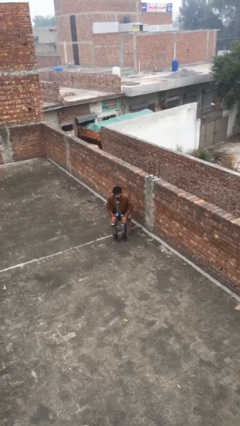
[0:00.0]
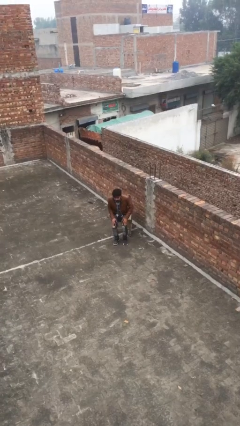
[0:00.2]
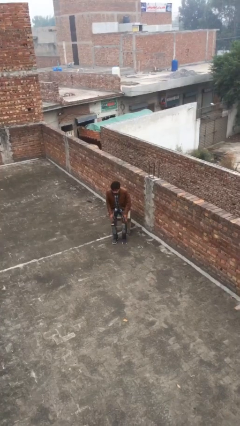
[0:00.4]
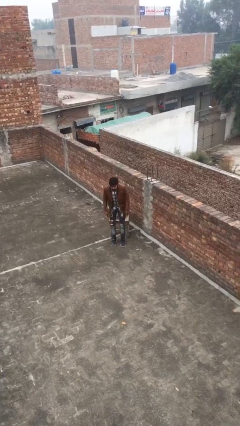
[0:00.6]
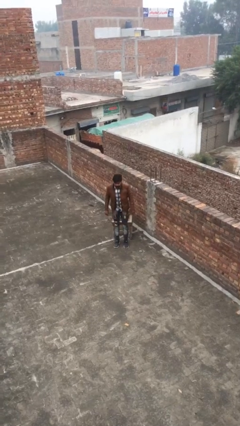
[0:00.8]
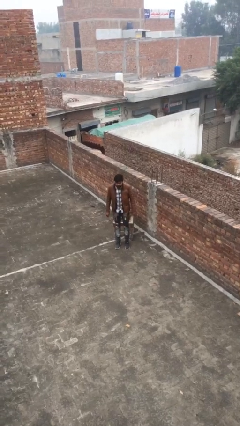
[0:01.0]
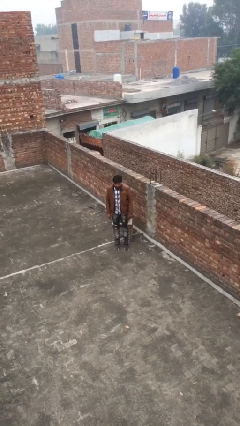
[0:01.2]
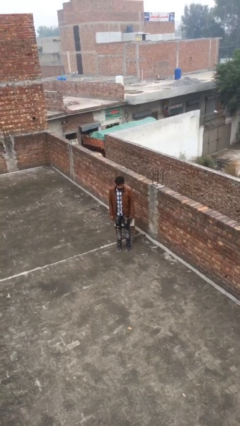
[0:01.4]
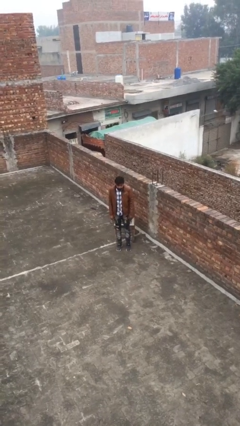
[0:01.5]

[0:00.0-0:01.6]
person stands up

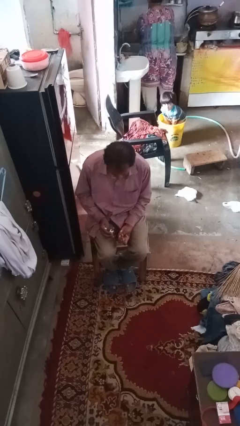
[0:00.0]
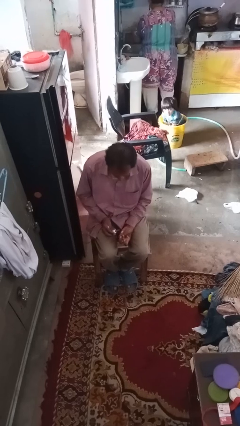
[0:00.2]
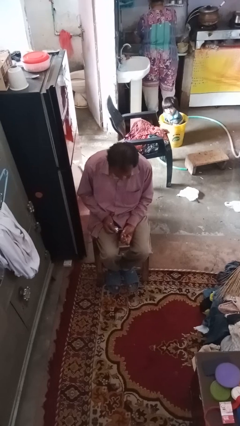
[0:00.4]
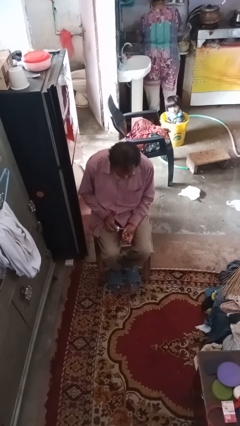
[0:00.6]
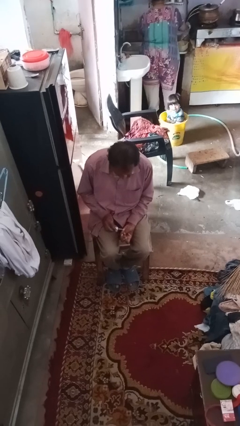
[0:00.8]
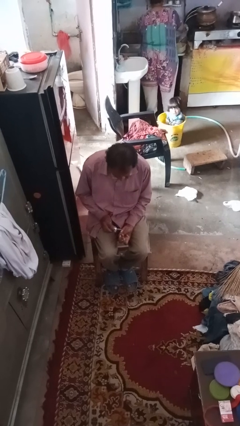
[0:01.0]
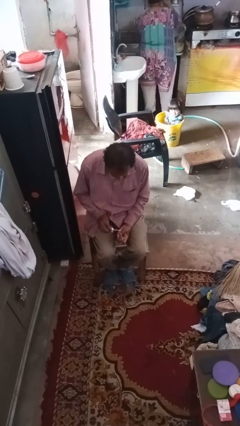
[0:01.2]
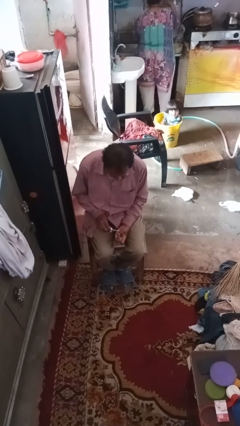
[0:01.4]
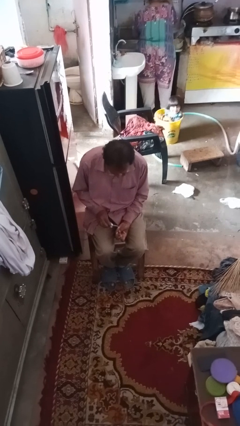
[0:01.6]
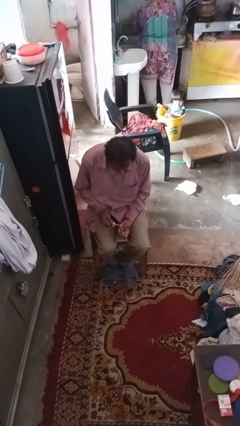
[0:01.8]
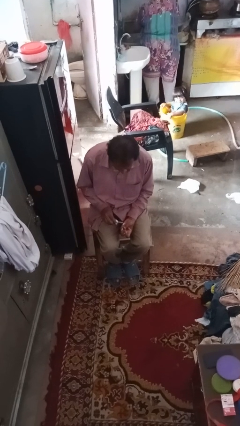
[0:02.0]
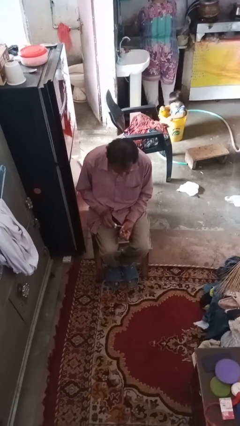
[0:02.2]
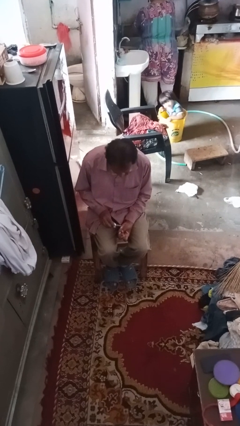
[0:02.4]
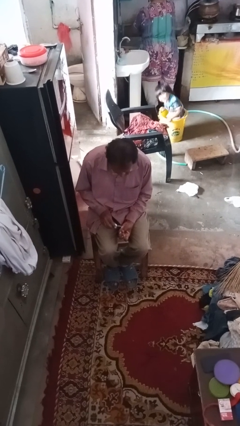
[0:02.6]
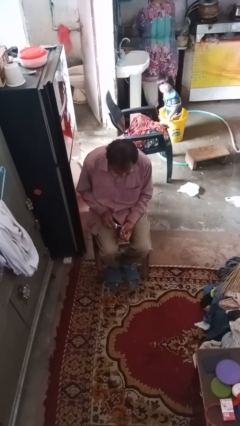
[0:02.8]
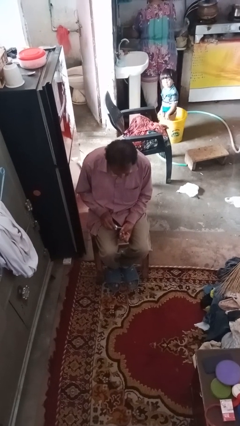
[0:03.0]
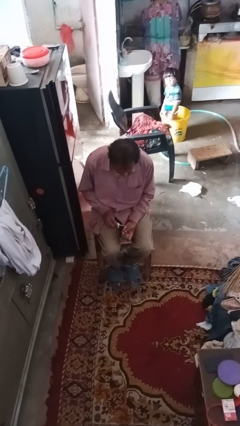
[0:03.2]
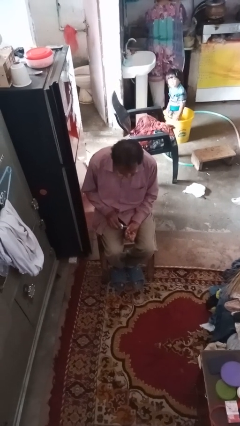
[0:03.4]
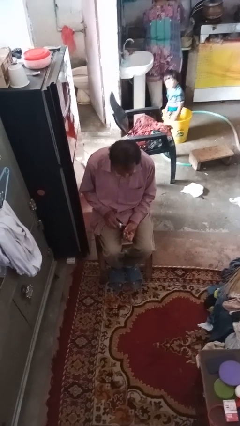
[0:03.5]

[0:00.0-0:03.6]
person paints fingernails

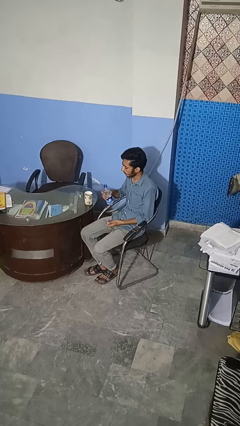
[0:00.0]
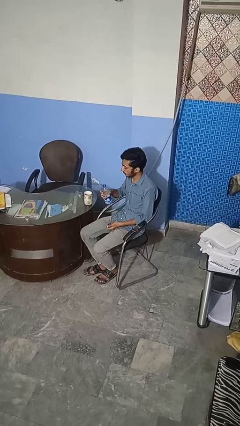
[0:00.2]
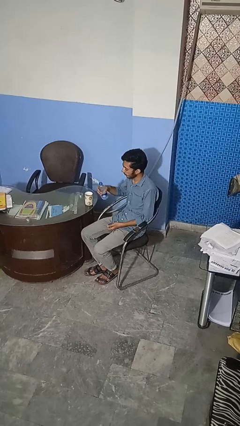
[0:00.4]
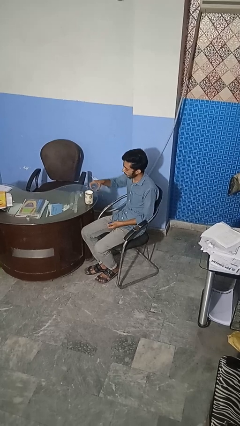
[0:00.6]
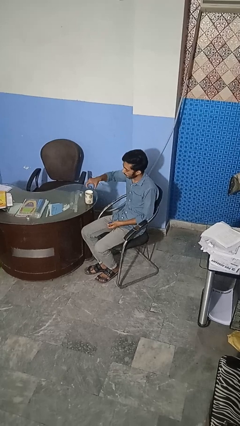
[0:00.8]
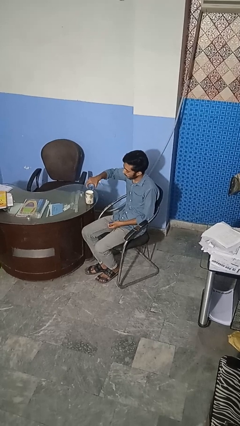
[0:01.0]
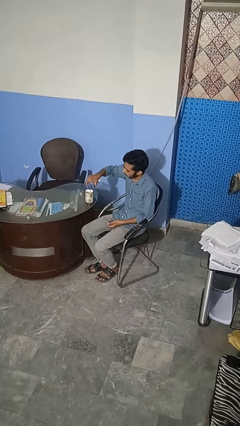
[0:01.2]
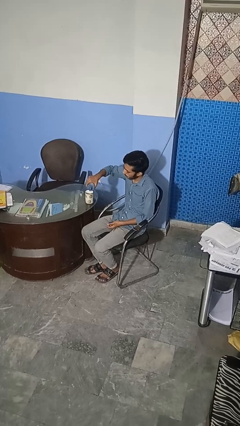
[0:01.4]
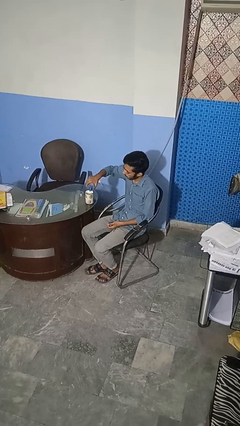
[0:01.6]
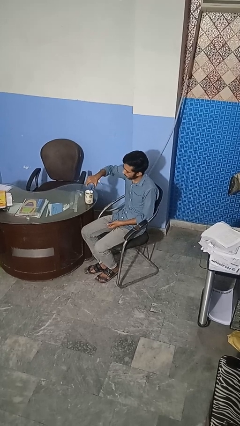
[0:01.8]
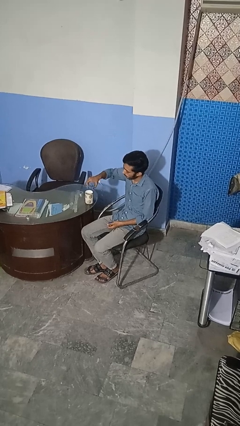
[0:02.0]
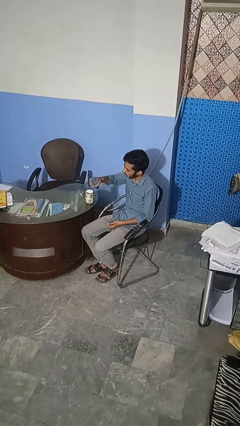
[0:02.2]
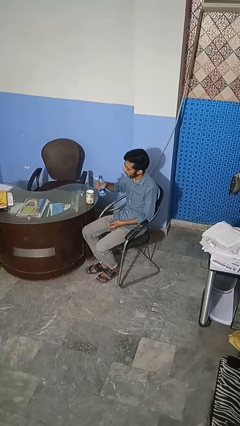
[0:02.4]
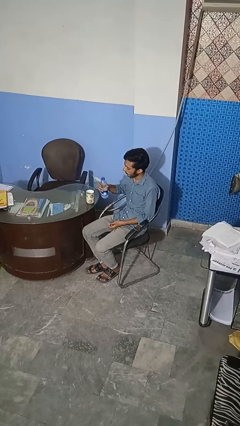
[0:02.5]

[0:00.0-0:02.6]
person pours liquid into cup

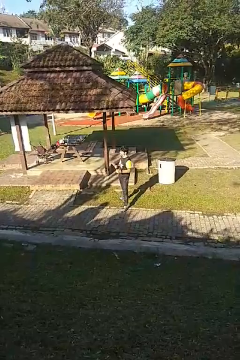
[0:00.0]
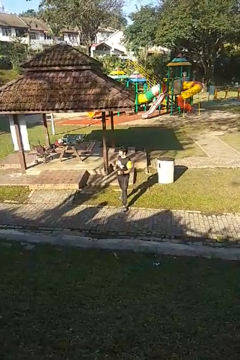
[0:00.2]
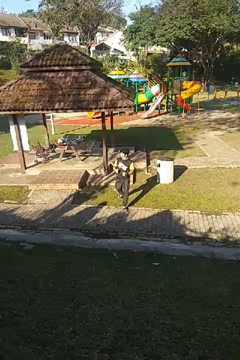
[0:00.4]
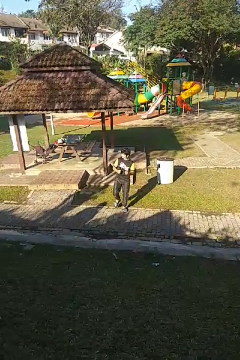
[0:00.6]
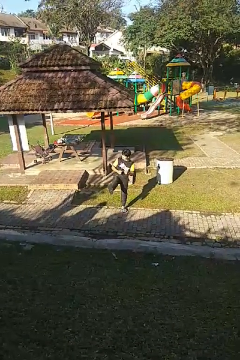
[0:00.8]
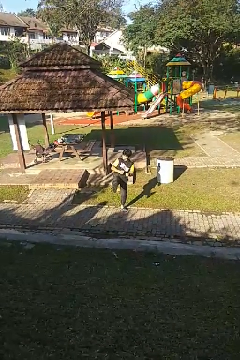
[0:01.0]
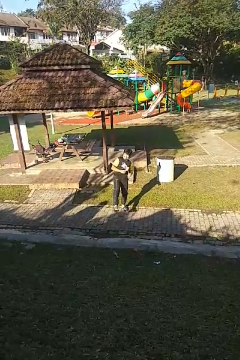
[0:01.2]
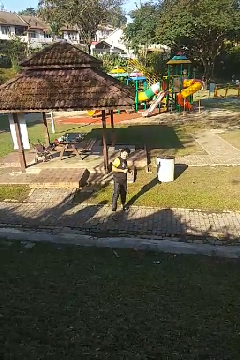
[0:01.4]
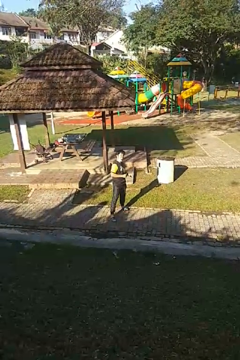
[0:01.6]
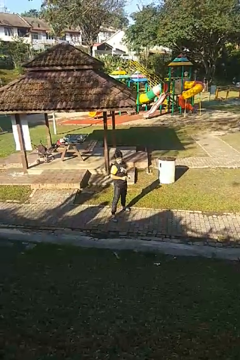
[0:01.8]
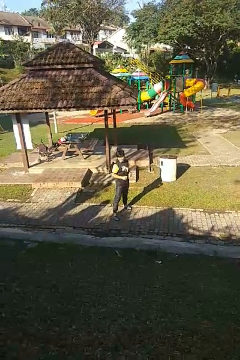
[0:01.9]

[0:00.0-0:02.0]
person karate kicks

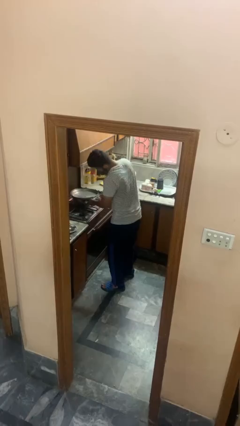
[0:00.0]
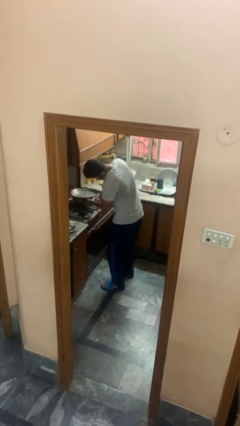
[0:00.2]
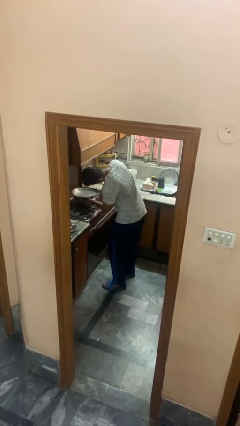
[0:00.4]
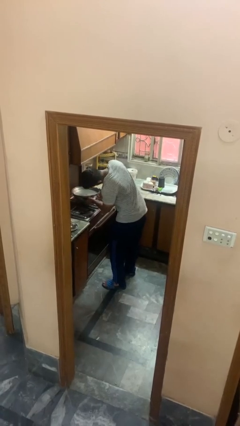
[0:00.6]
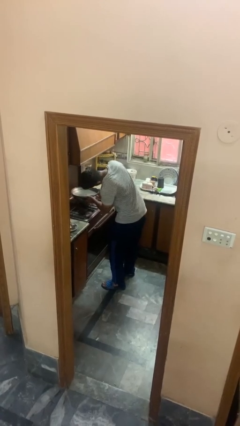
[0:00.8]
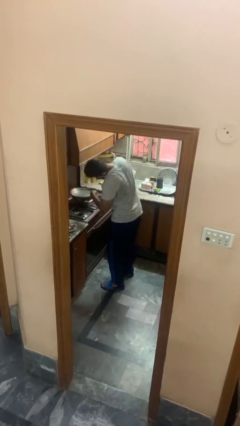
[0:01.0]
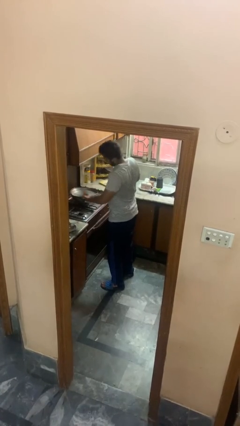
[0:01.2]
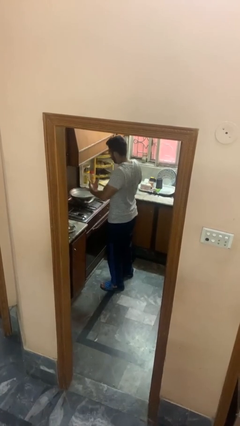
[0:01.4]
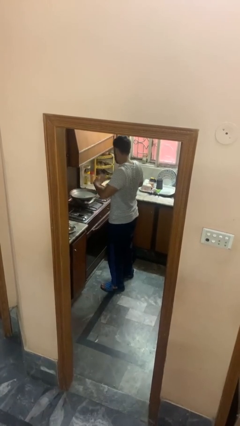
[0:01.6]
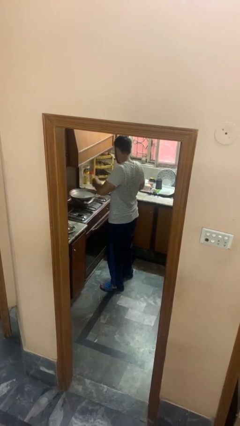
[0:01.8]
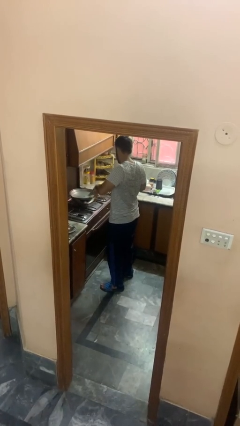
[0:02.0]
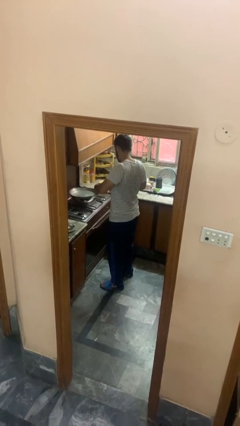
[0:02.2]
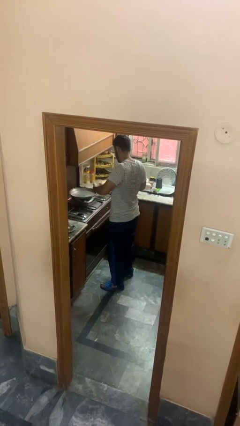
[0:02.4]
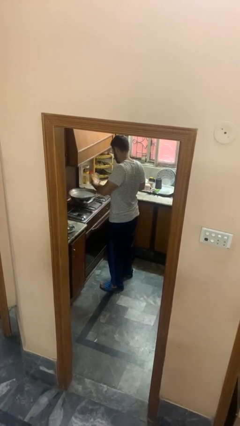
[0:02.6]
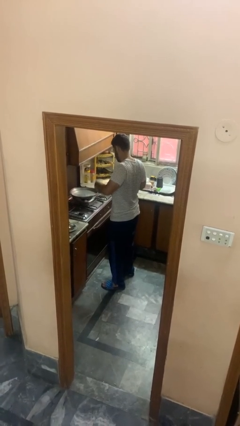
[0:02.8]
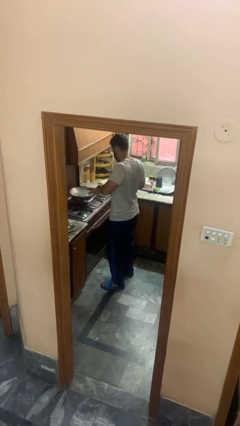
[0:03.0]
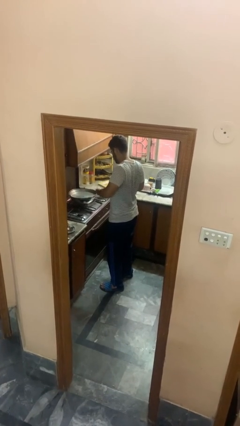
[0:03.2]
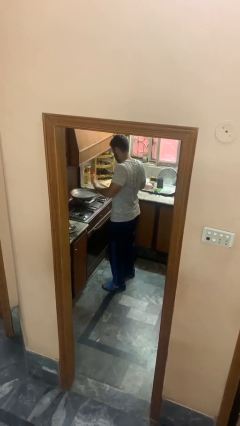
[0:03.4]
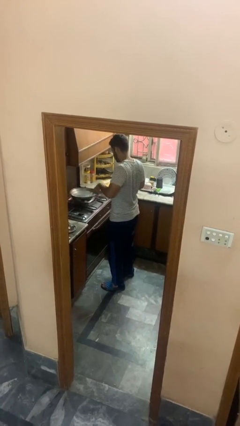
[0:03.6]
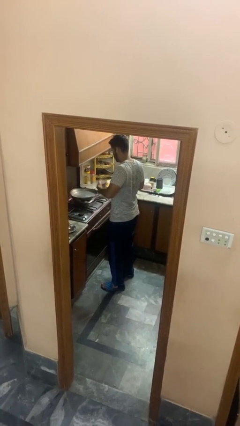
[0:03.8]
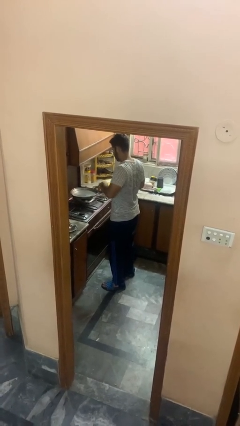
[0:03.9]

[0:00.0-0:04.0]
person burns hand

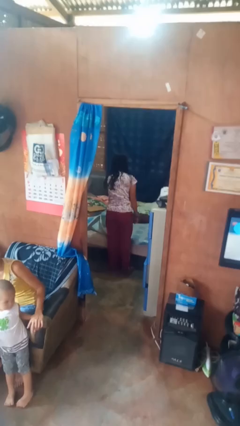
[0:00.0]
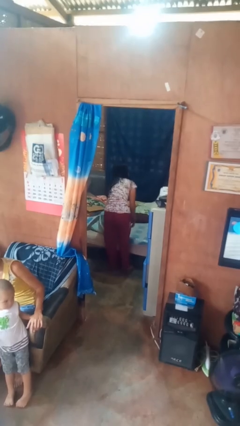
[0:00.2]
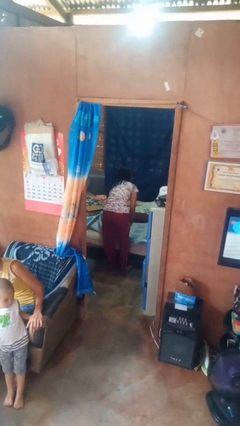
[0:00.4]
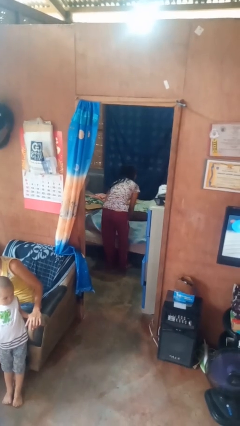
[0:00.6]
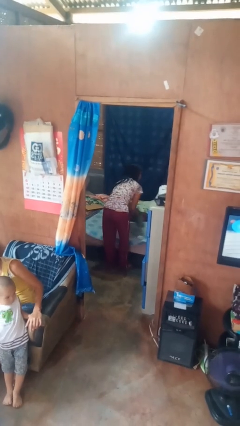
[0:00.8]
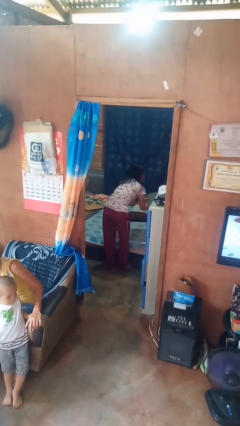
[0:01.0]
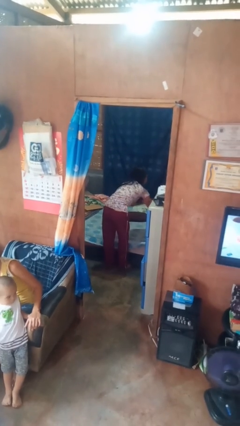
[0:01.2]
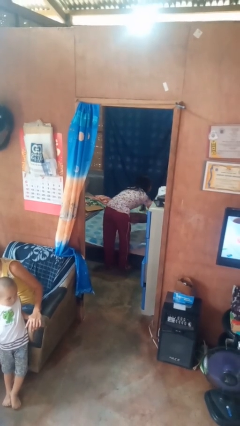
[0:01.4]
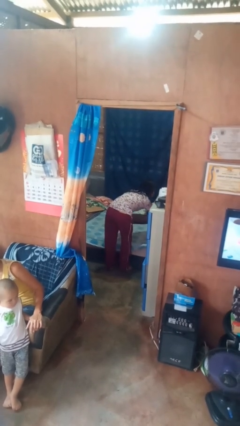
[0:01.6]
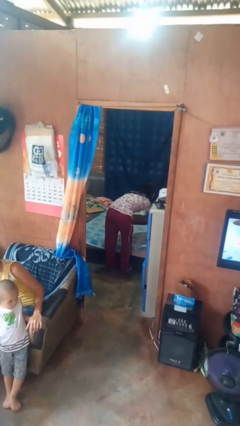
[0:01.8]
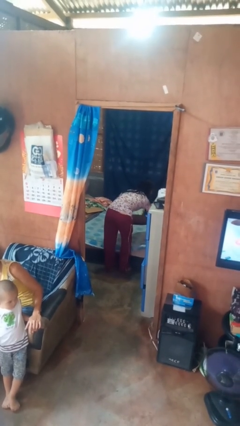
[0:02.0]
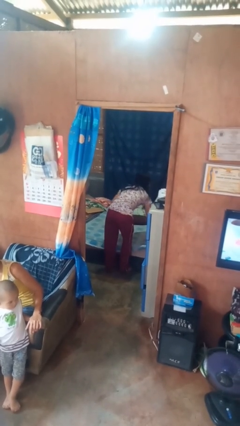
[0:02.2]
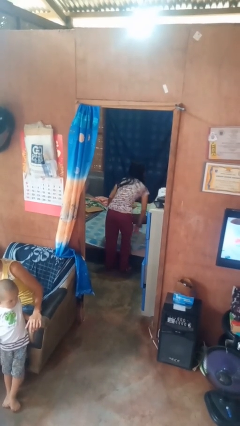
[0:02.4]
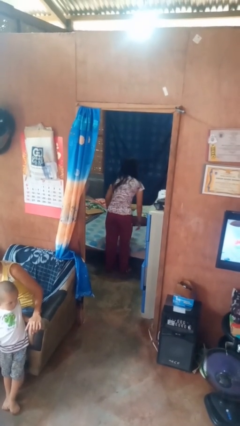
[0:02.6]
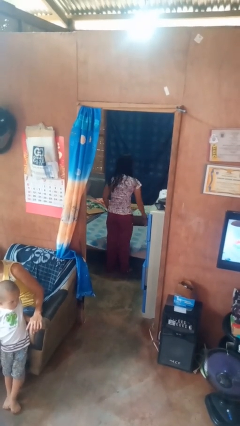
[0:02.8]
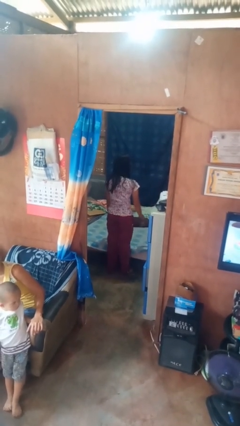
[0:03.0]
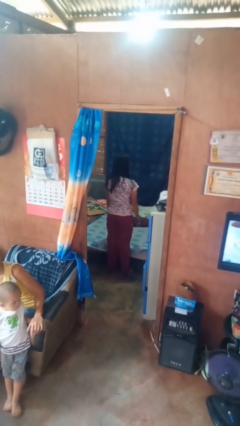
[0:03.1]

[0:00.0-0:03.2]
person makes bed

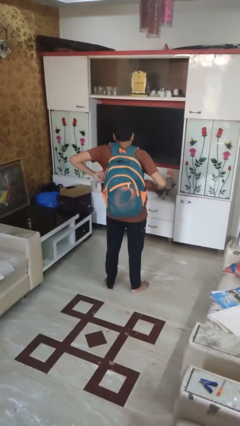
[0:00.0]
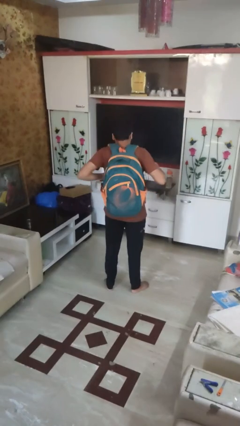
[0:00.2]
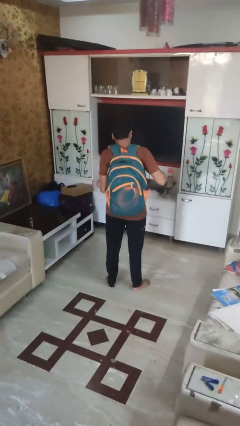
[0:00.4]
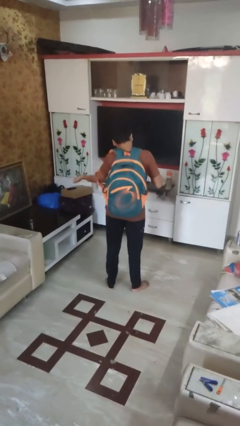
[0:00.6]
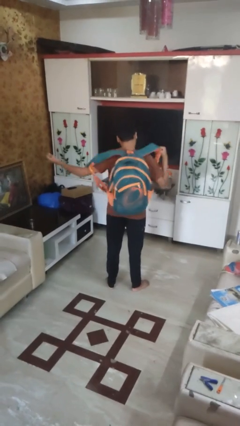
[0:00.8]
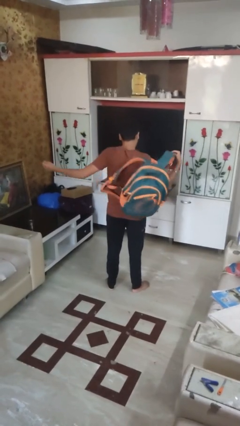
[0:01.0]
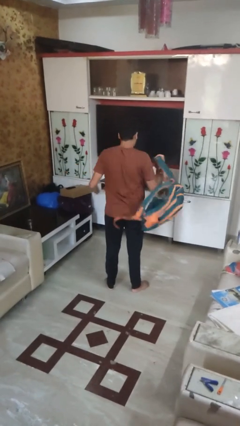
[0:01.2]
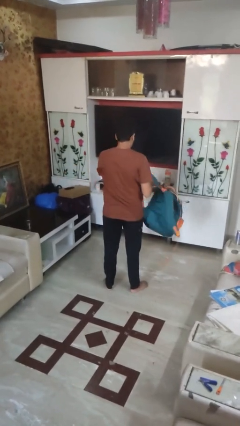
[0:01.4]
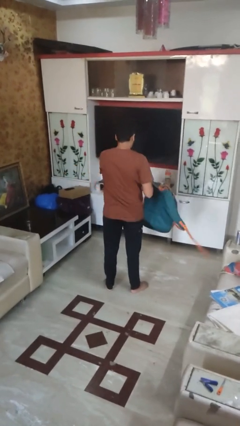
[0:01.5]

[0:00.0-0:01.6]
person takes off backpack
